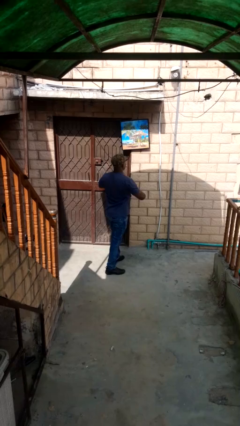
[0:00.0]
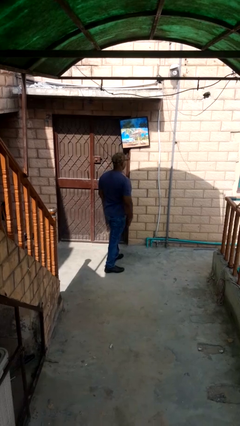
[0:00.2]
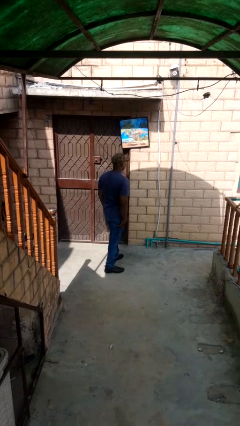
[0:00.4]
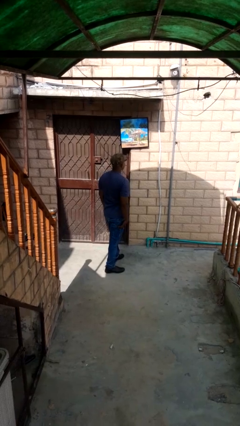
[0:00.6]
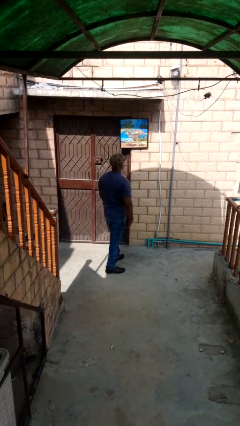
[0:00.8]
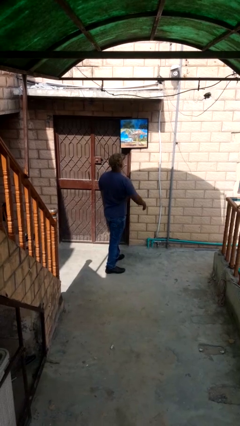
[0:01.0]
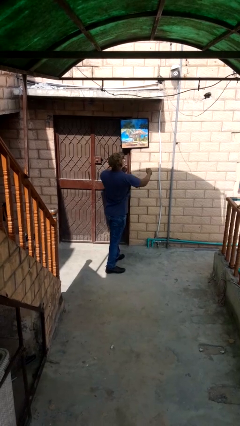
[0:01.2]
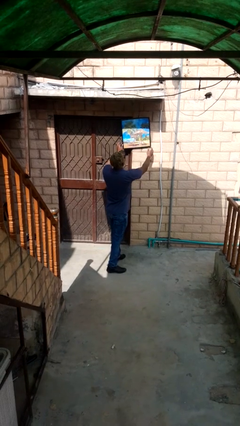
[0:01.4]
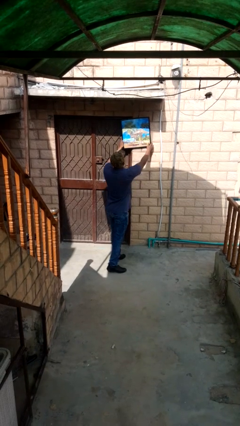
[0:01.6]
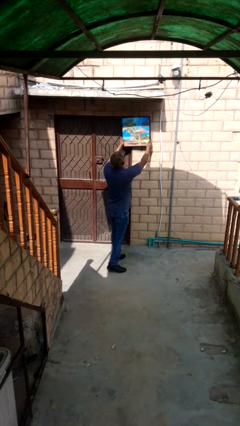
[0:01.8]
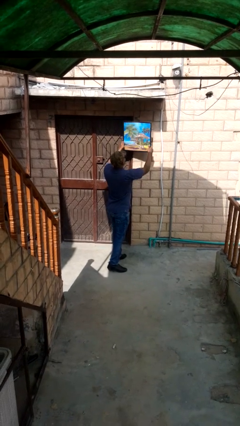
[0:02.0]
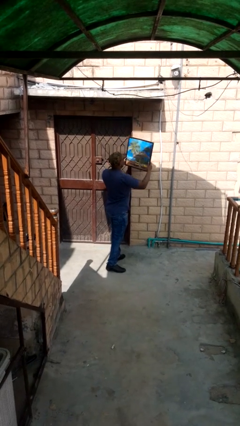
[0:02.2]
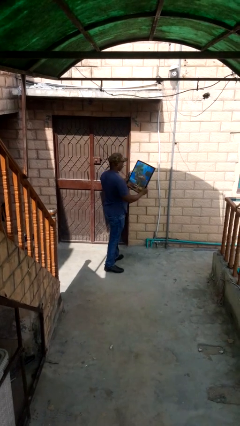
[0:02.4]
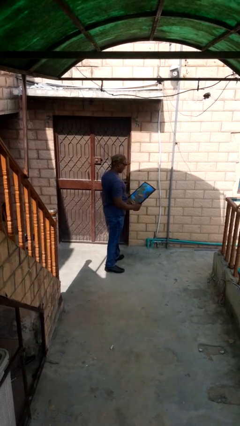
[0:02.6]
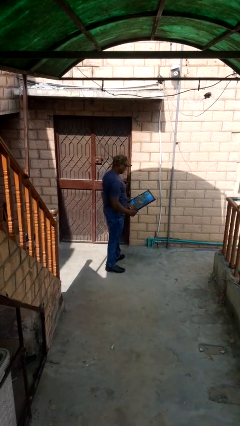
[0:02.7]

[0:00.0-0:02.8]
person takes down picture frame

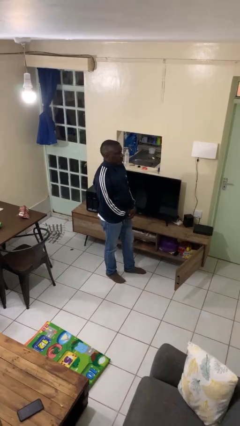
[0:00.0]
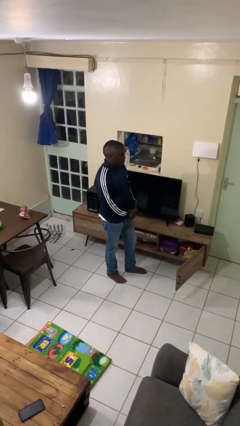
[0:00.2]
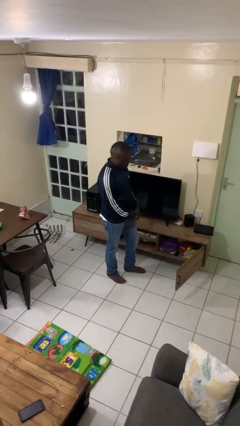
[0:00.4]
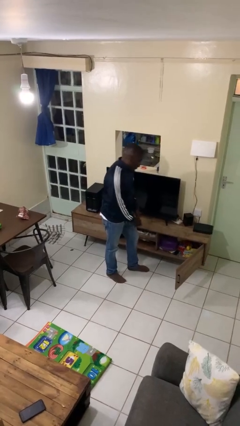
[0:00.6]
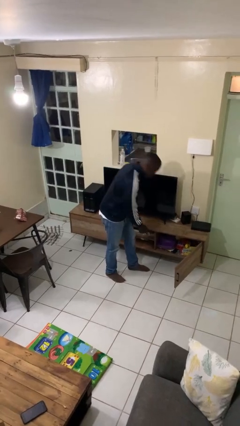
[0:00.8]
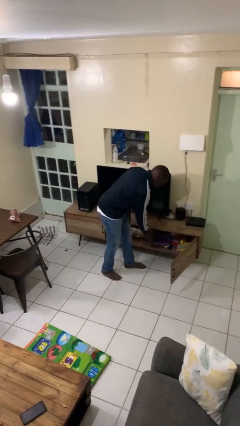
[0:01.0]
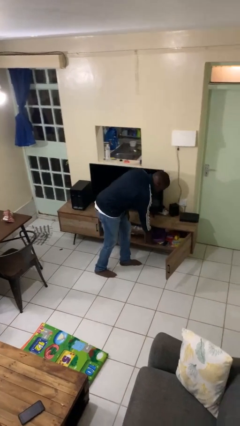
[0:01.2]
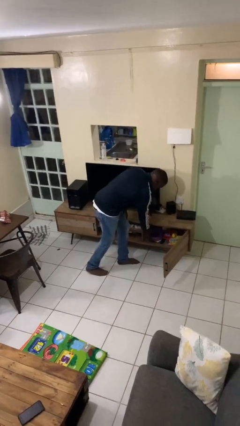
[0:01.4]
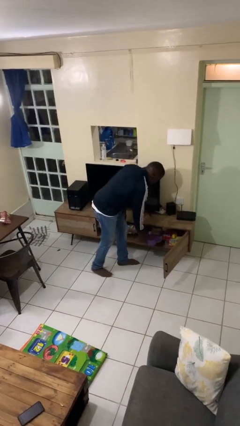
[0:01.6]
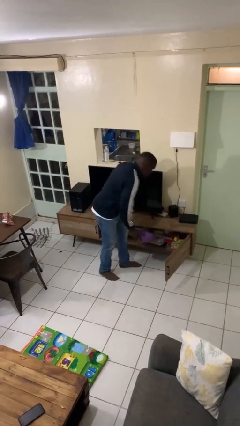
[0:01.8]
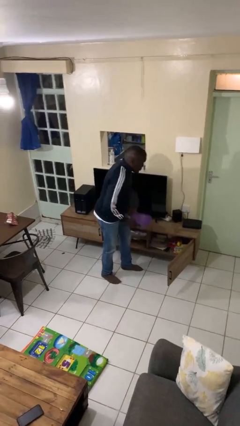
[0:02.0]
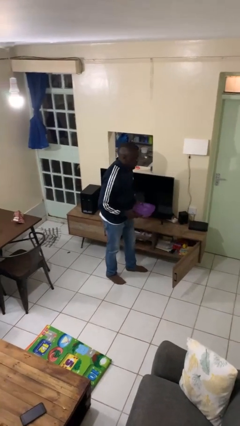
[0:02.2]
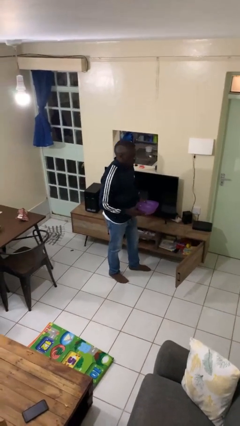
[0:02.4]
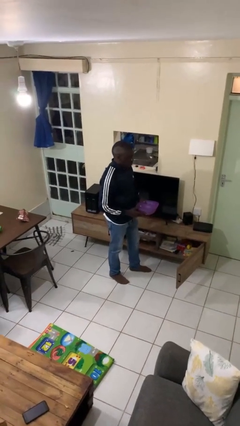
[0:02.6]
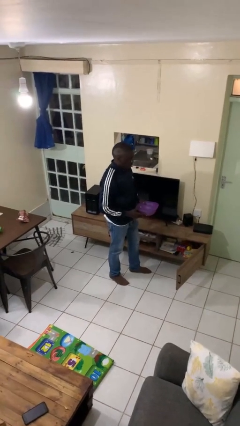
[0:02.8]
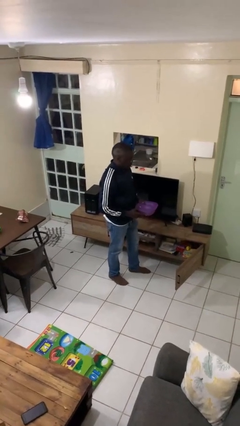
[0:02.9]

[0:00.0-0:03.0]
person picks up object from cabinet

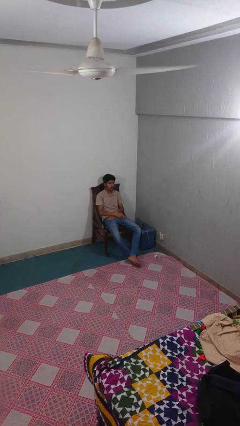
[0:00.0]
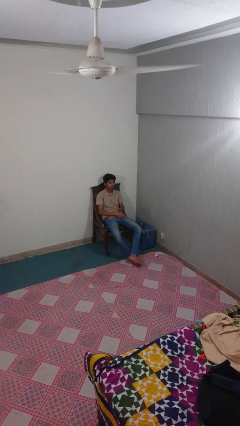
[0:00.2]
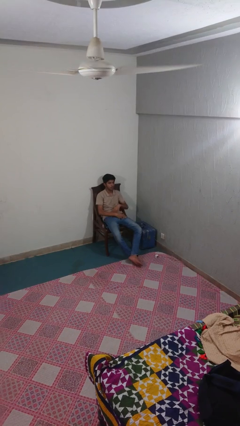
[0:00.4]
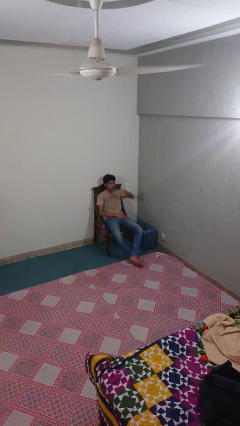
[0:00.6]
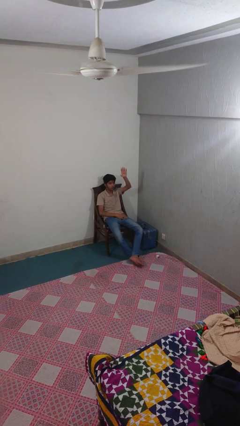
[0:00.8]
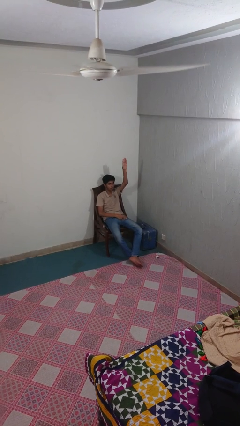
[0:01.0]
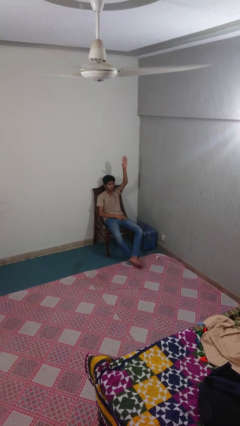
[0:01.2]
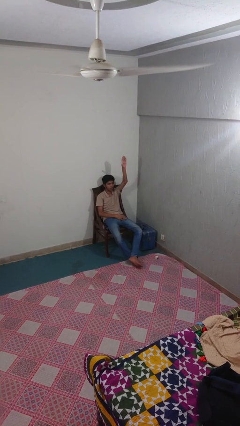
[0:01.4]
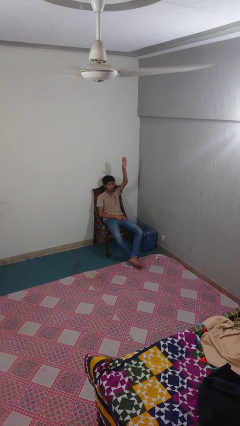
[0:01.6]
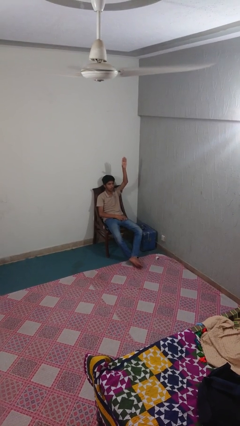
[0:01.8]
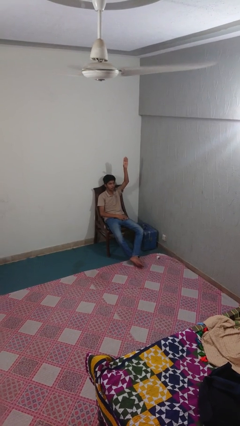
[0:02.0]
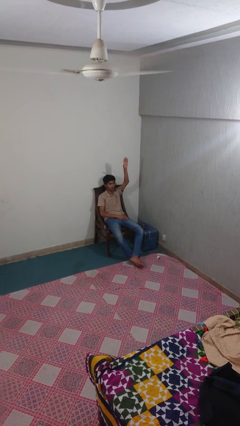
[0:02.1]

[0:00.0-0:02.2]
person gestures raise hand

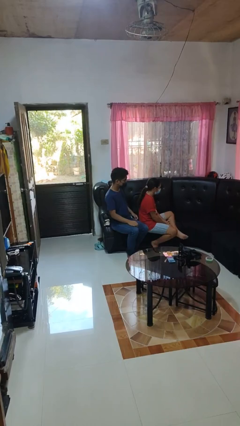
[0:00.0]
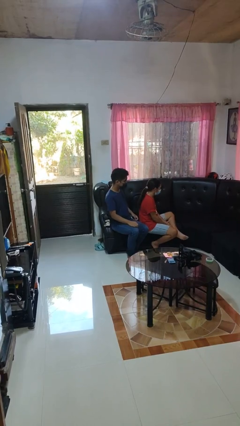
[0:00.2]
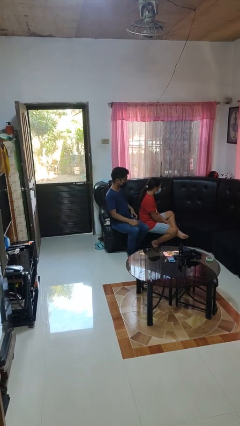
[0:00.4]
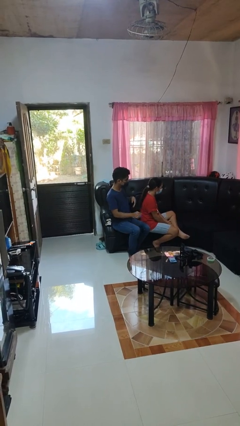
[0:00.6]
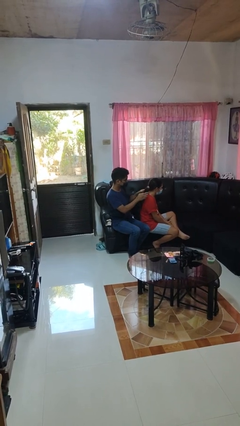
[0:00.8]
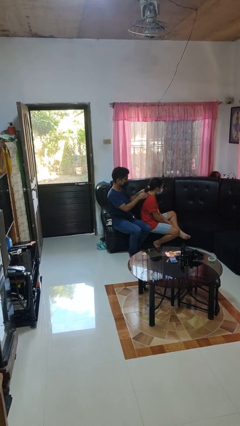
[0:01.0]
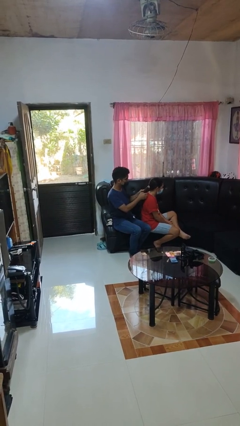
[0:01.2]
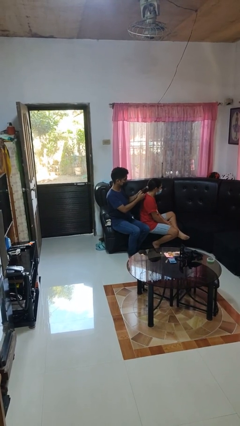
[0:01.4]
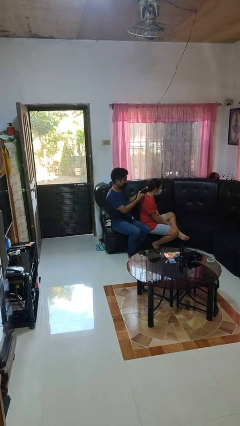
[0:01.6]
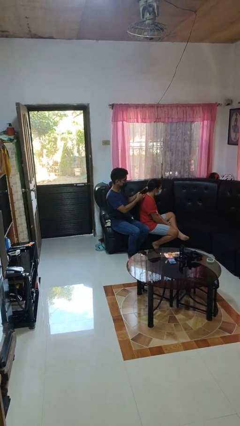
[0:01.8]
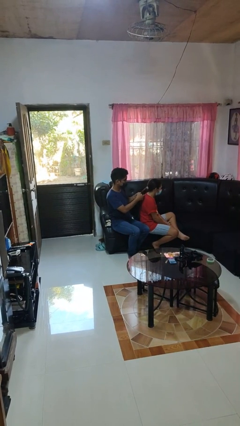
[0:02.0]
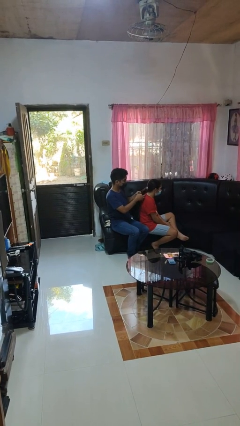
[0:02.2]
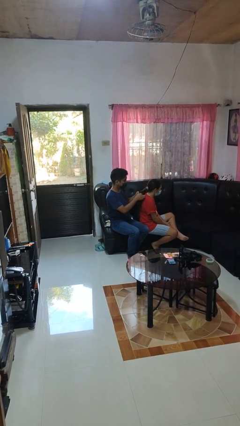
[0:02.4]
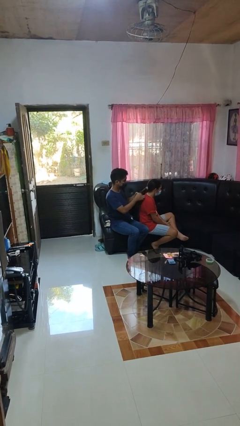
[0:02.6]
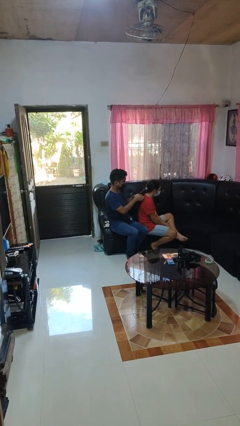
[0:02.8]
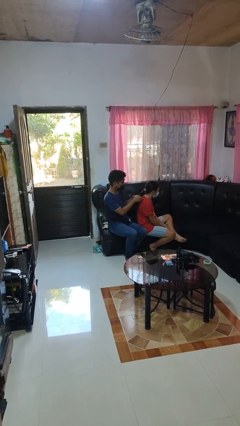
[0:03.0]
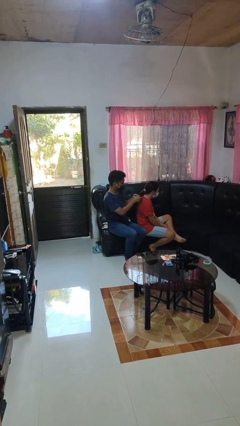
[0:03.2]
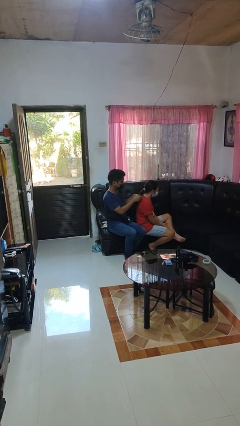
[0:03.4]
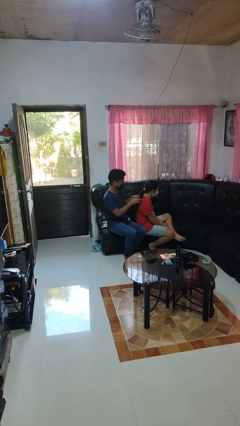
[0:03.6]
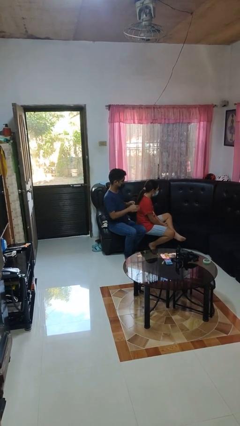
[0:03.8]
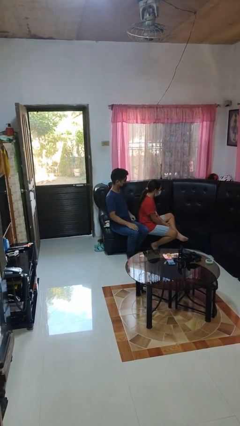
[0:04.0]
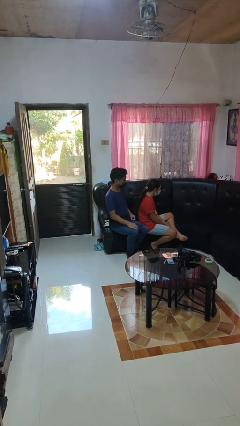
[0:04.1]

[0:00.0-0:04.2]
person braids hair of person

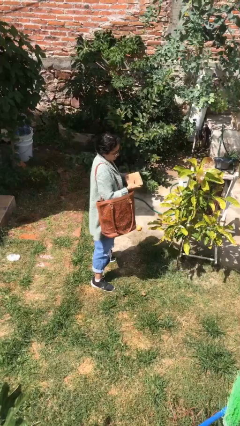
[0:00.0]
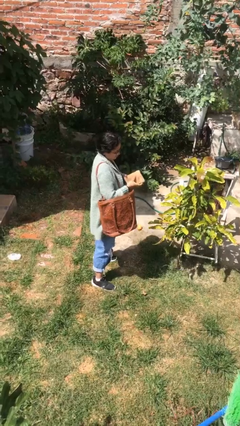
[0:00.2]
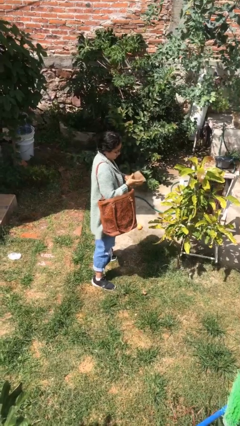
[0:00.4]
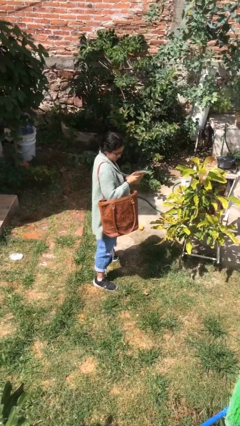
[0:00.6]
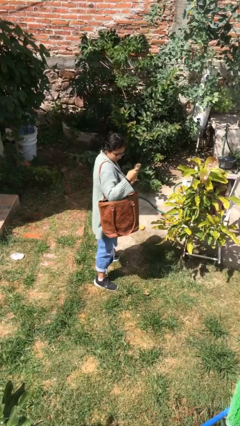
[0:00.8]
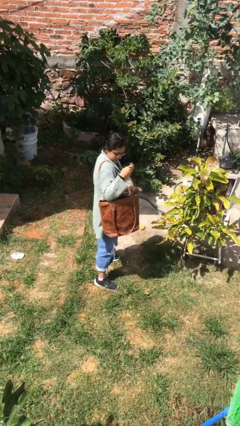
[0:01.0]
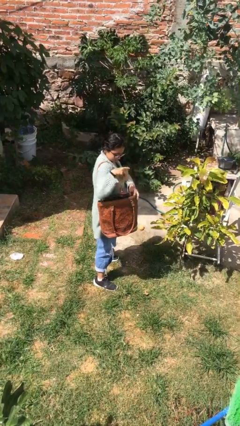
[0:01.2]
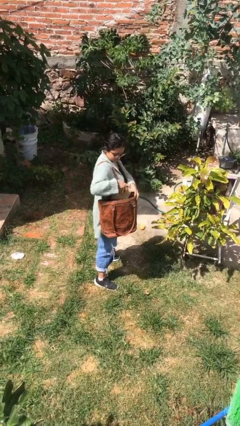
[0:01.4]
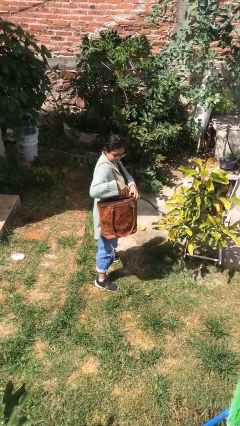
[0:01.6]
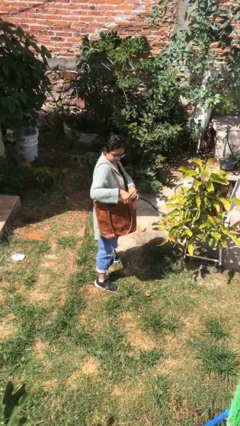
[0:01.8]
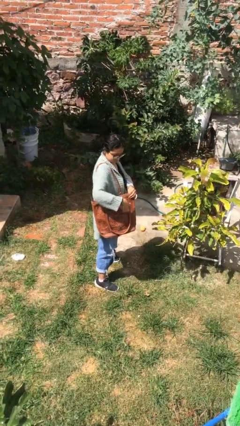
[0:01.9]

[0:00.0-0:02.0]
person puts object into purse

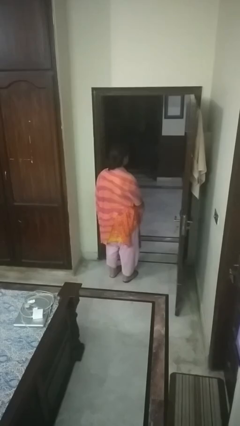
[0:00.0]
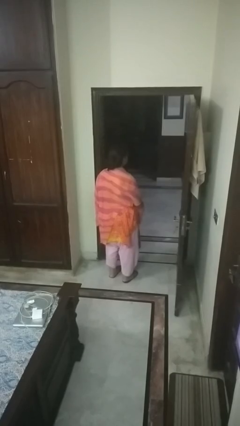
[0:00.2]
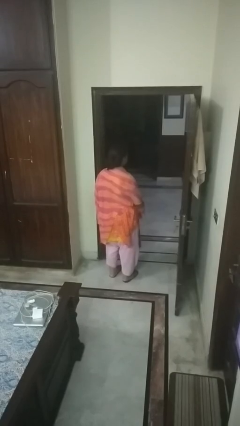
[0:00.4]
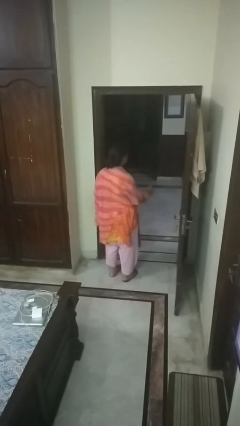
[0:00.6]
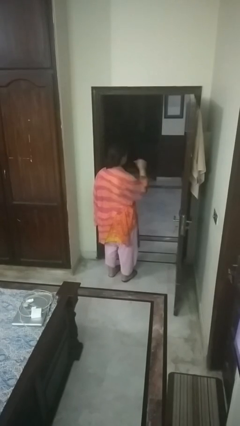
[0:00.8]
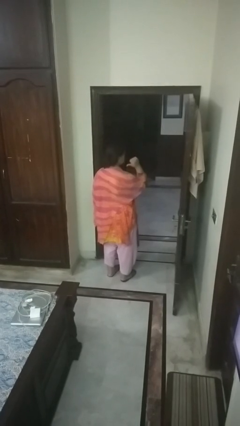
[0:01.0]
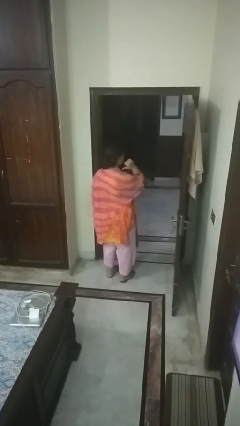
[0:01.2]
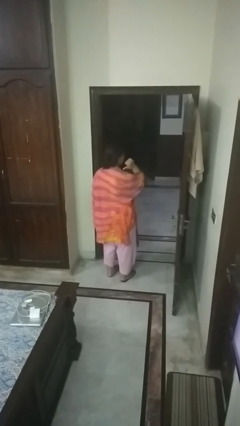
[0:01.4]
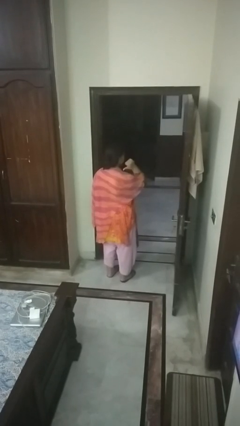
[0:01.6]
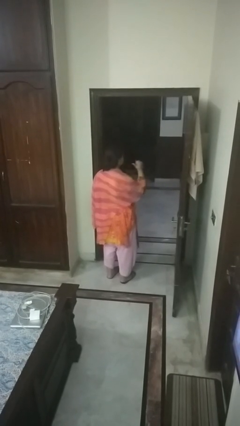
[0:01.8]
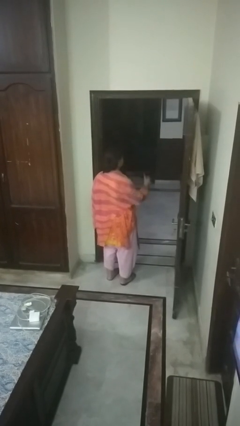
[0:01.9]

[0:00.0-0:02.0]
person gestures behind me

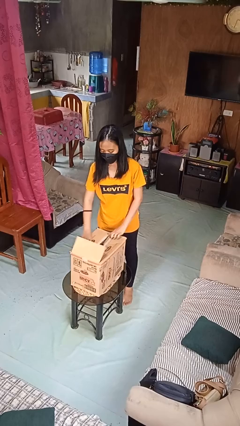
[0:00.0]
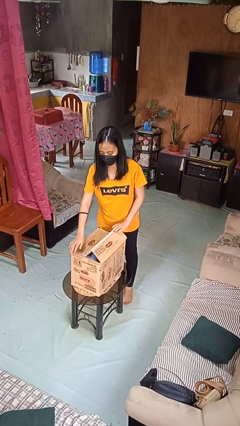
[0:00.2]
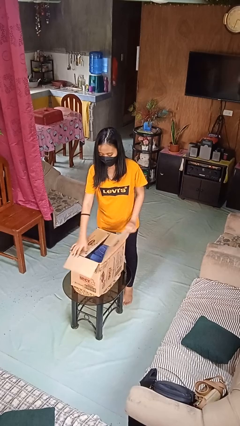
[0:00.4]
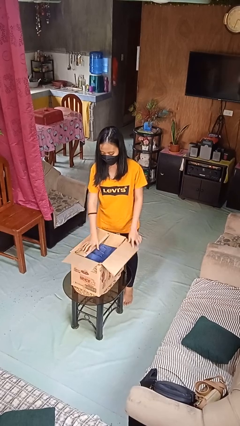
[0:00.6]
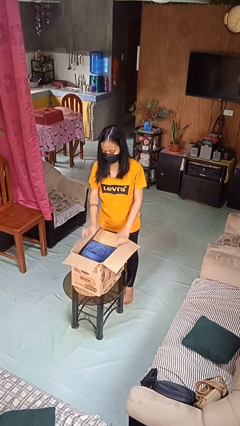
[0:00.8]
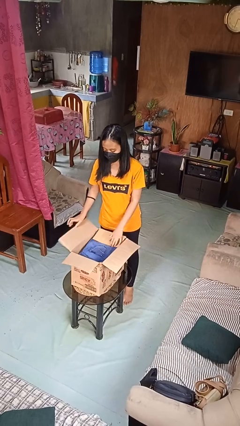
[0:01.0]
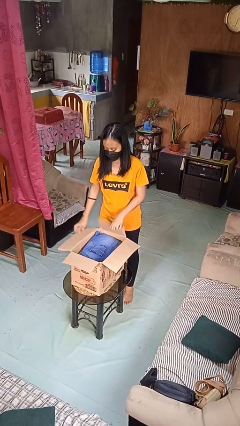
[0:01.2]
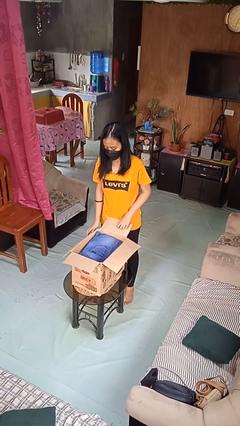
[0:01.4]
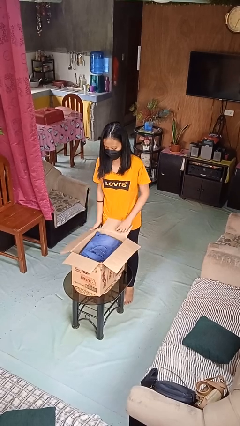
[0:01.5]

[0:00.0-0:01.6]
person opens box
